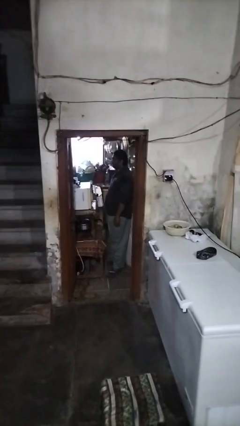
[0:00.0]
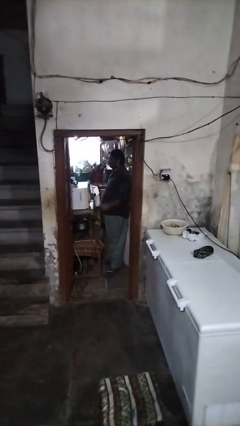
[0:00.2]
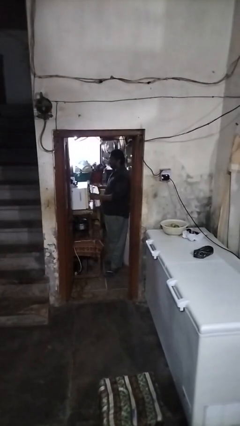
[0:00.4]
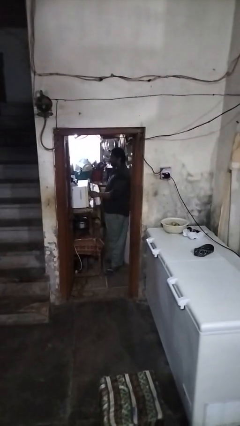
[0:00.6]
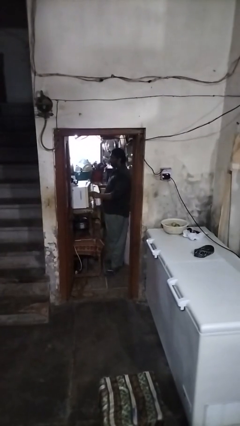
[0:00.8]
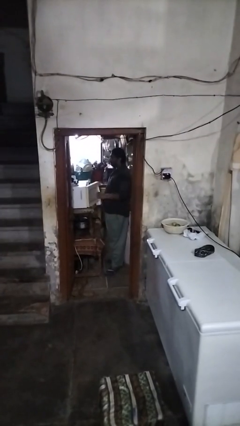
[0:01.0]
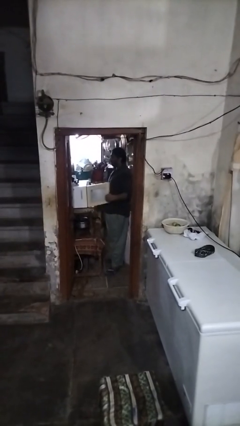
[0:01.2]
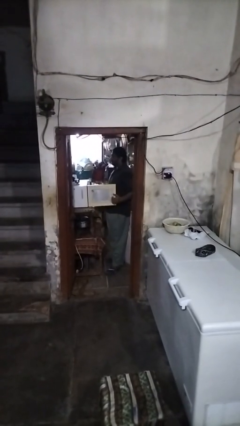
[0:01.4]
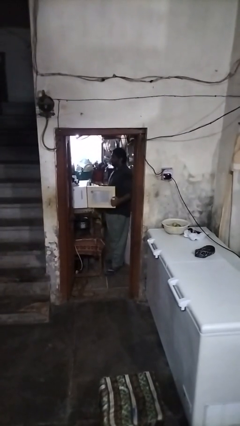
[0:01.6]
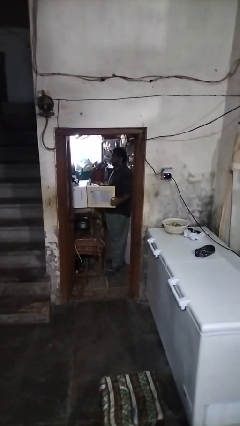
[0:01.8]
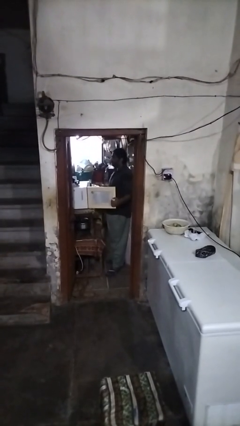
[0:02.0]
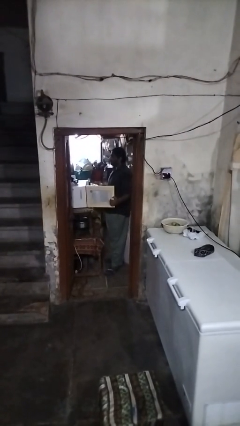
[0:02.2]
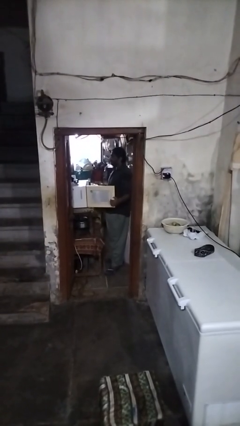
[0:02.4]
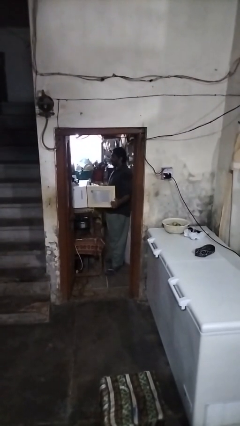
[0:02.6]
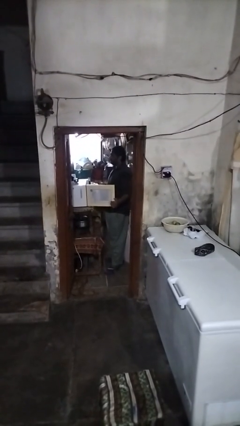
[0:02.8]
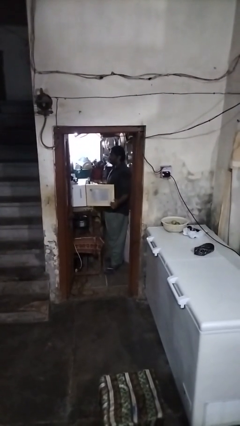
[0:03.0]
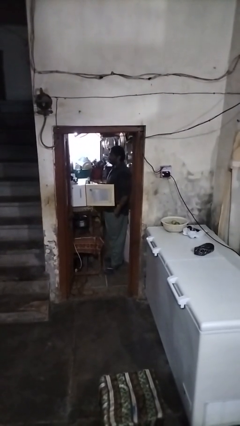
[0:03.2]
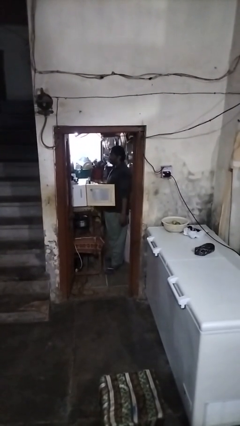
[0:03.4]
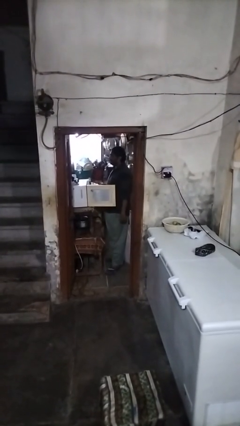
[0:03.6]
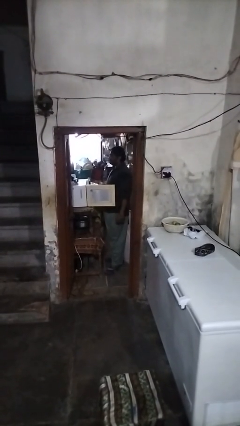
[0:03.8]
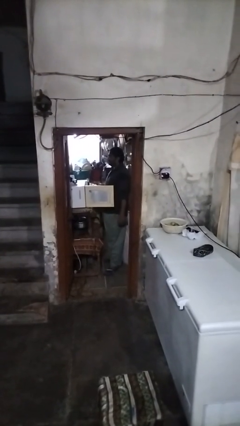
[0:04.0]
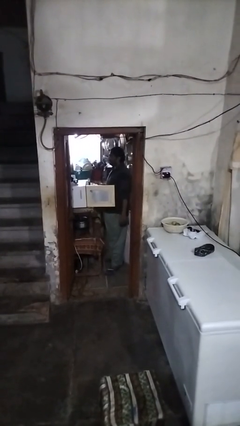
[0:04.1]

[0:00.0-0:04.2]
person opens oven door

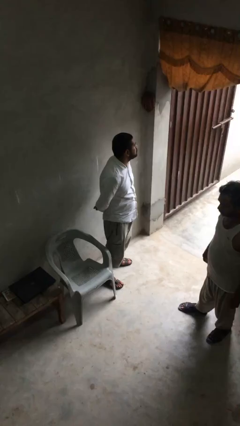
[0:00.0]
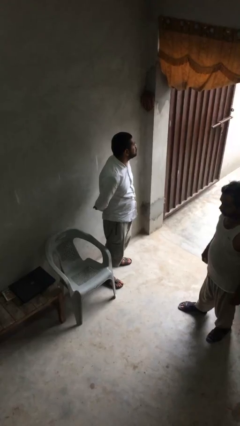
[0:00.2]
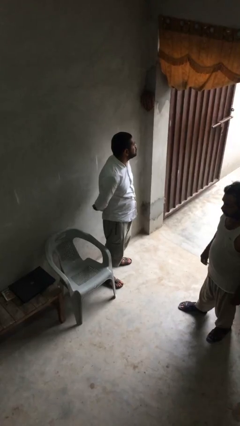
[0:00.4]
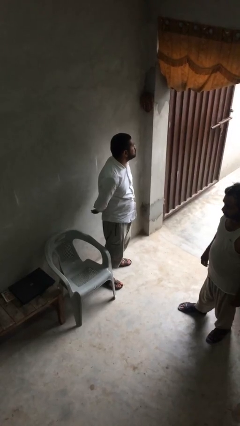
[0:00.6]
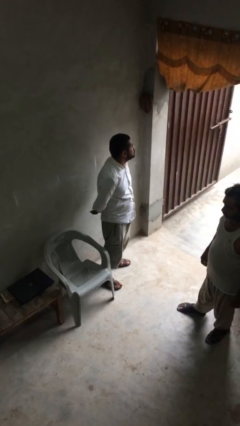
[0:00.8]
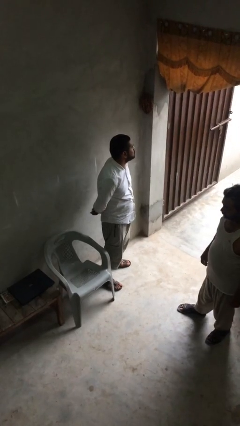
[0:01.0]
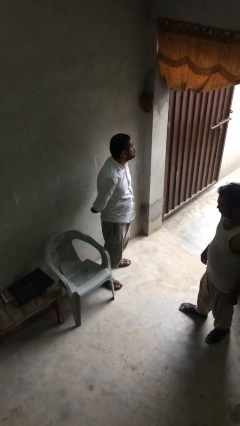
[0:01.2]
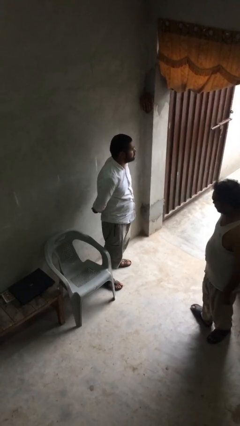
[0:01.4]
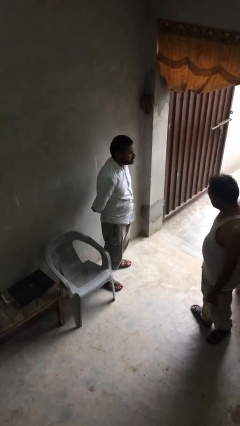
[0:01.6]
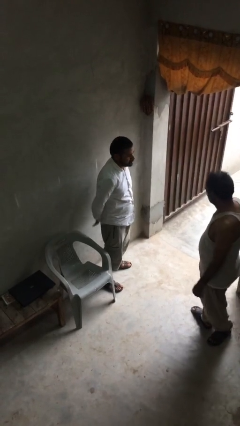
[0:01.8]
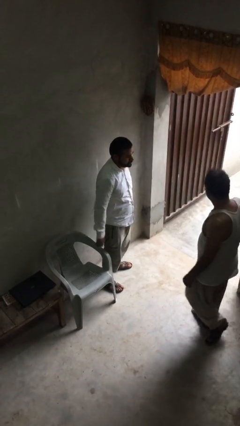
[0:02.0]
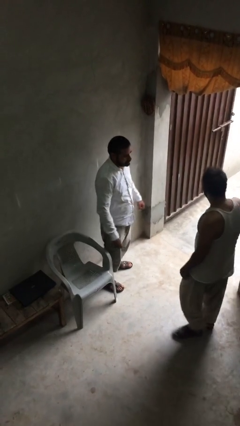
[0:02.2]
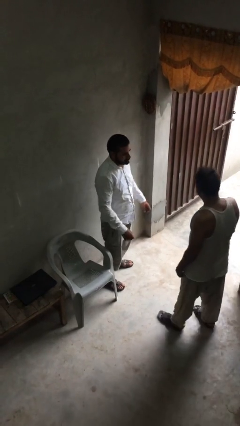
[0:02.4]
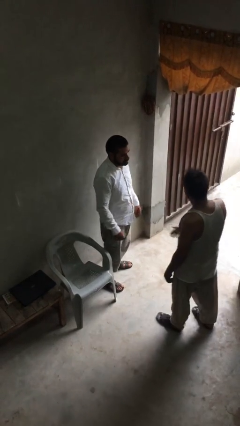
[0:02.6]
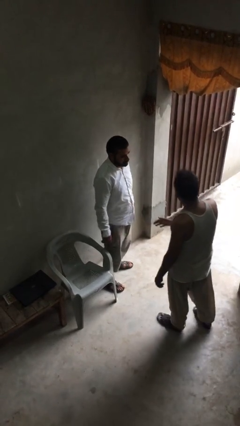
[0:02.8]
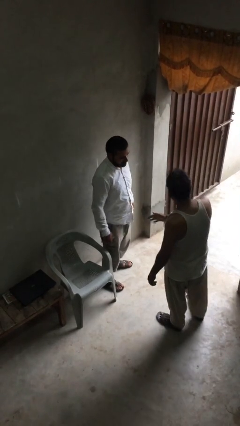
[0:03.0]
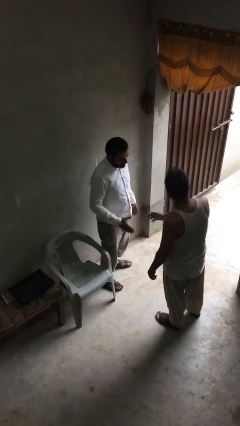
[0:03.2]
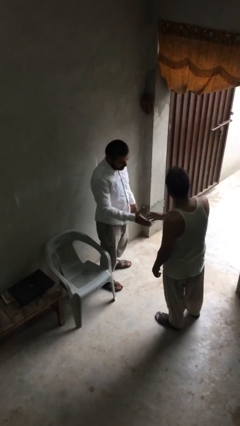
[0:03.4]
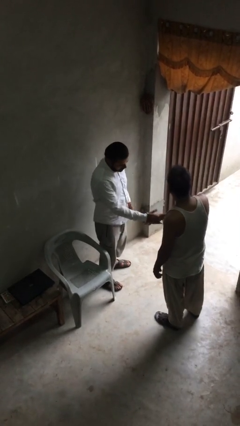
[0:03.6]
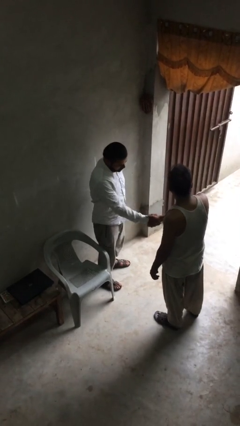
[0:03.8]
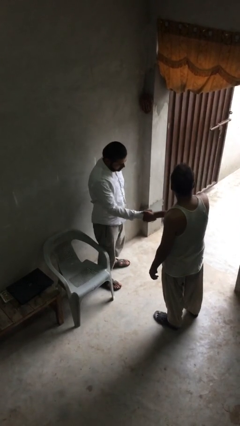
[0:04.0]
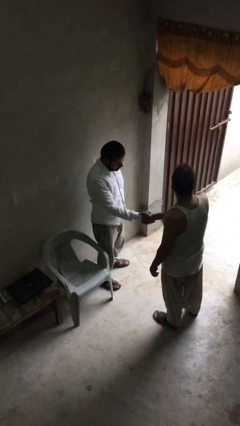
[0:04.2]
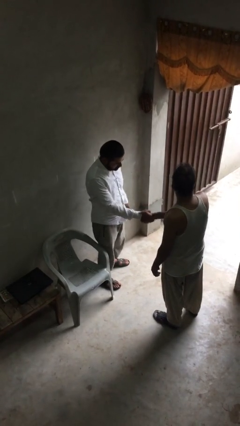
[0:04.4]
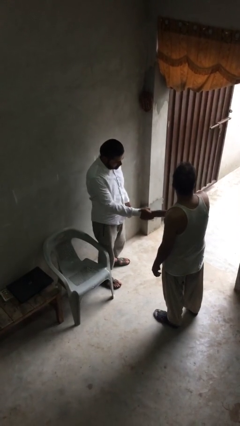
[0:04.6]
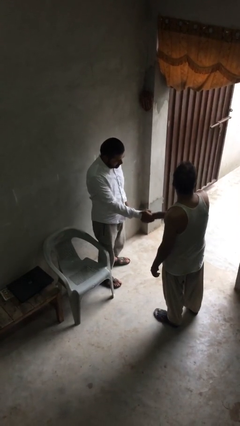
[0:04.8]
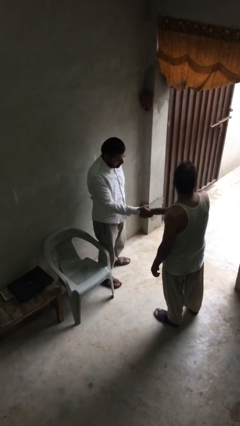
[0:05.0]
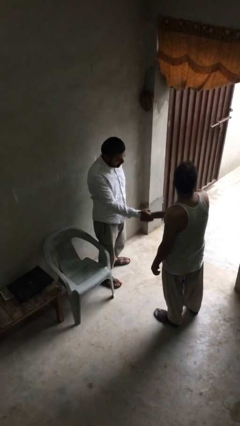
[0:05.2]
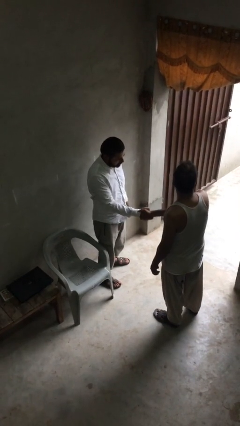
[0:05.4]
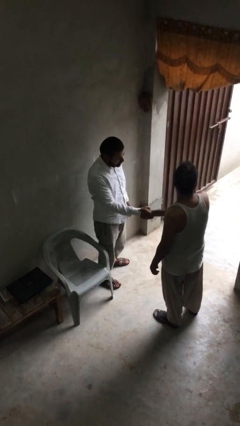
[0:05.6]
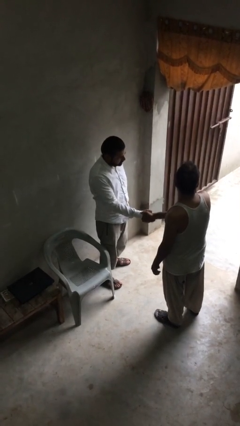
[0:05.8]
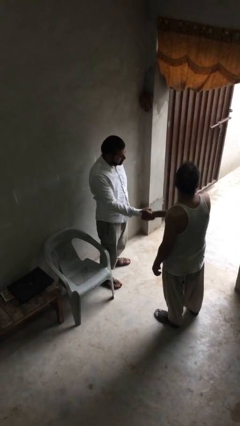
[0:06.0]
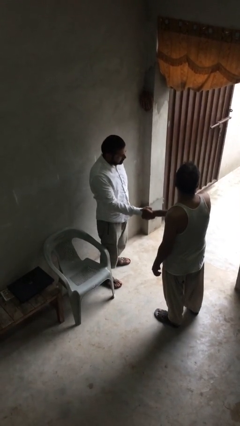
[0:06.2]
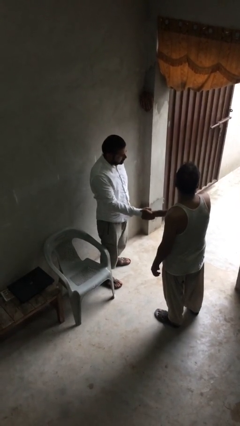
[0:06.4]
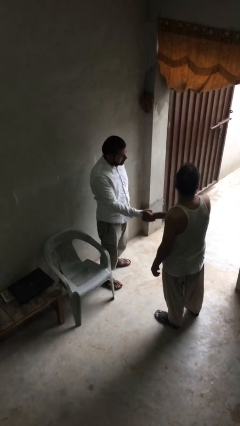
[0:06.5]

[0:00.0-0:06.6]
person shakes hand

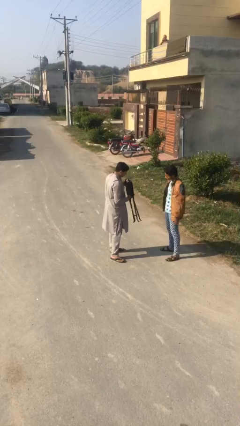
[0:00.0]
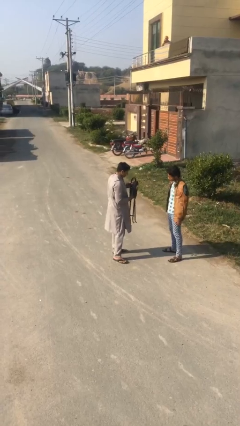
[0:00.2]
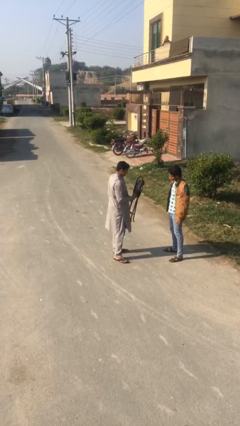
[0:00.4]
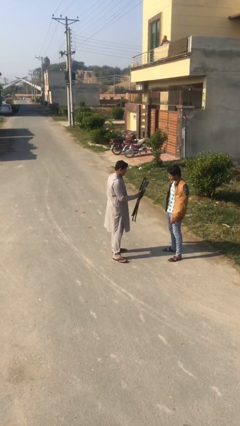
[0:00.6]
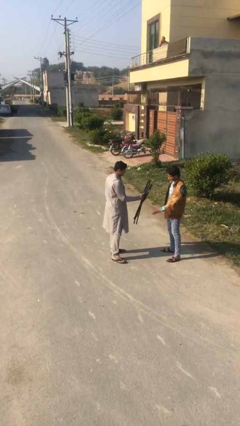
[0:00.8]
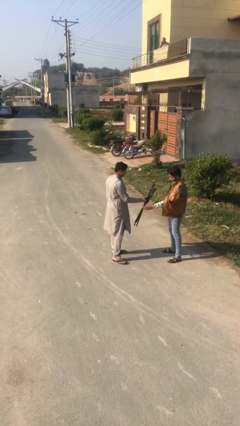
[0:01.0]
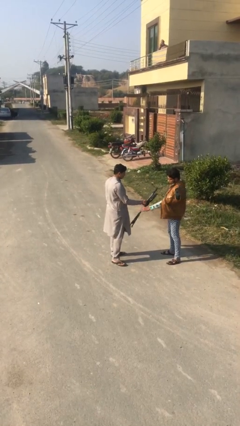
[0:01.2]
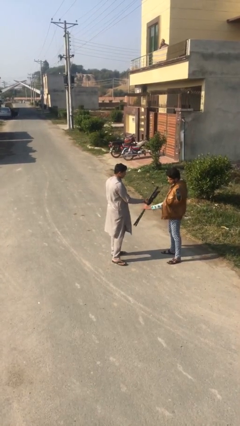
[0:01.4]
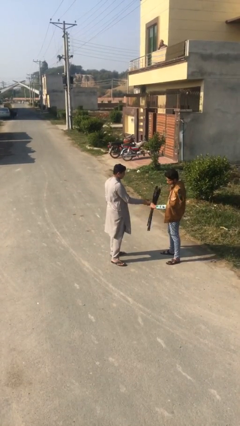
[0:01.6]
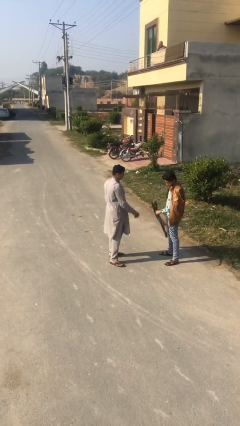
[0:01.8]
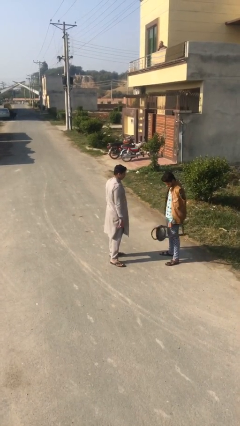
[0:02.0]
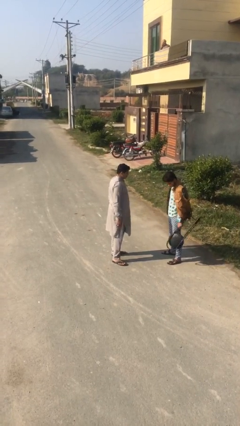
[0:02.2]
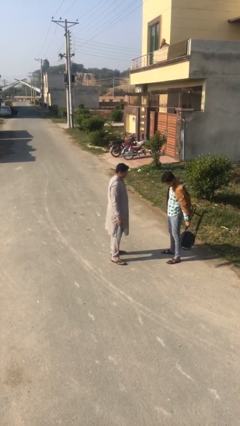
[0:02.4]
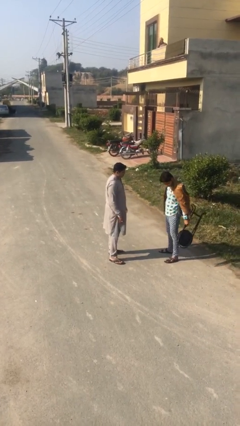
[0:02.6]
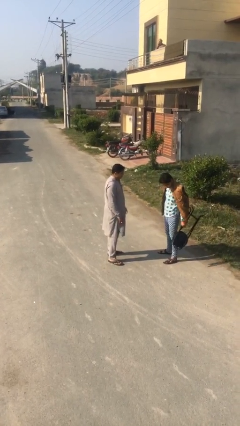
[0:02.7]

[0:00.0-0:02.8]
person transfers object to person

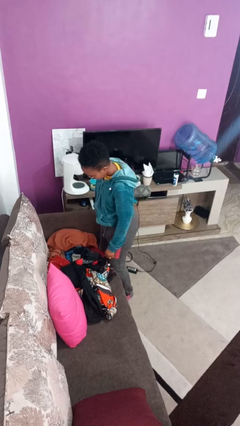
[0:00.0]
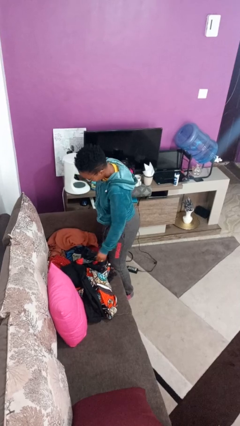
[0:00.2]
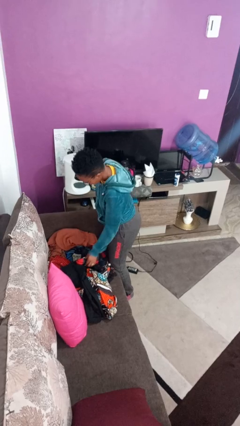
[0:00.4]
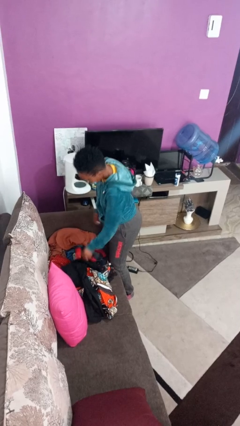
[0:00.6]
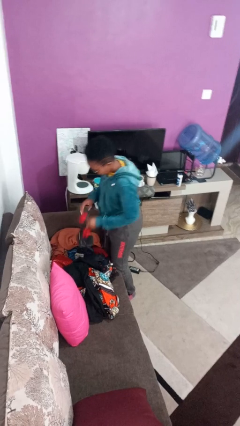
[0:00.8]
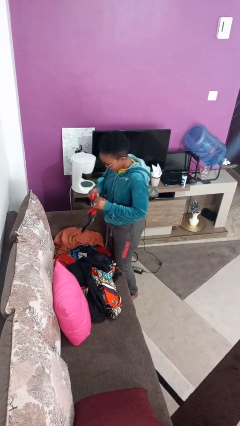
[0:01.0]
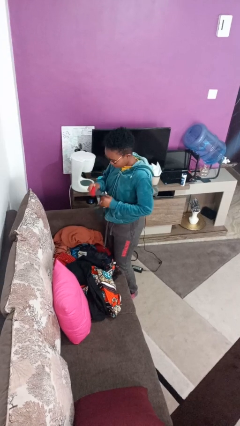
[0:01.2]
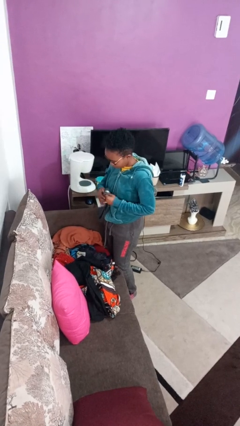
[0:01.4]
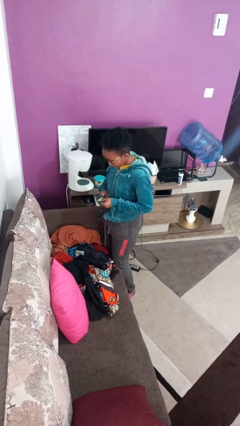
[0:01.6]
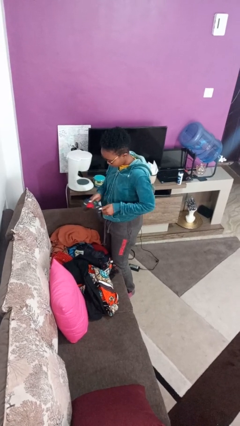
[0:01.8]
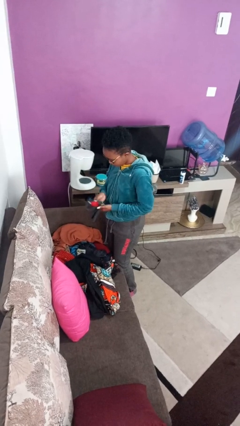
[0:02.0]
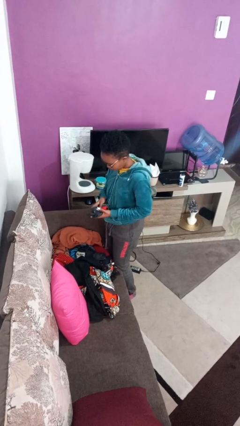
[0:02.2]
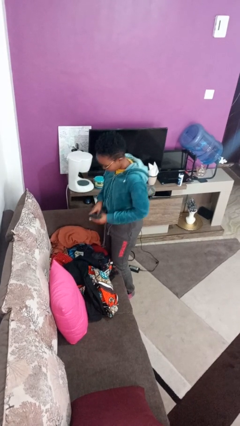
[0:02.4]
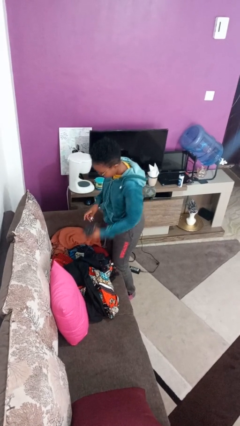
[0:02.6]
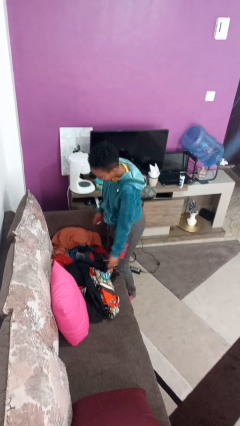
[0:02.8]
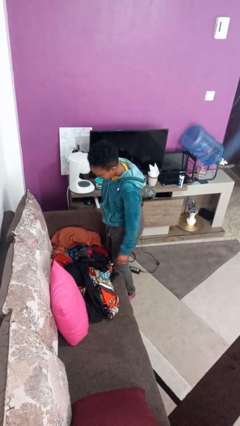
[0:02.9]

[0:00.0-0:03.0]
person folds socks

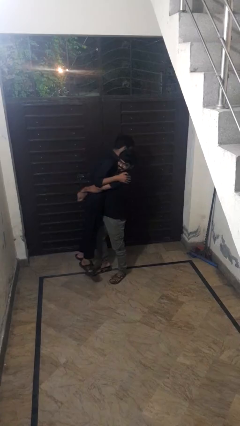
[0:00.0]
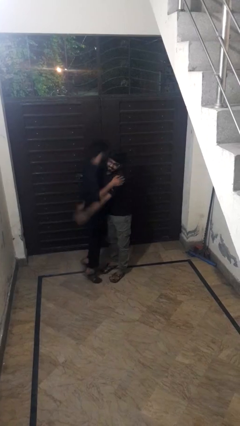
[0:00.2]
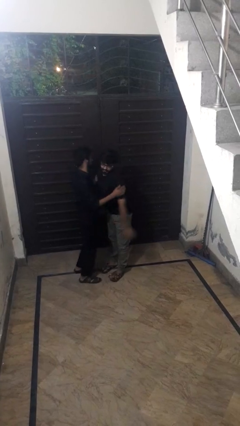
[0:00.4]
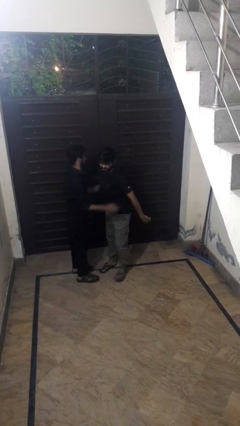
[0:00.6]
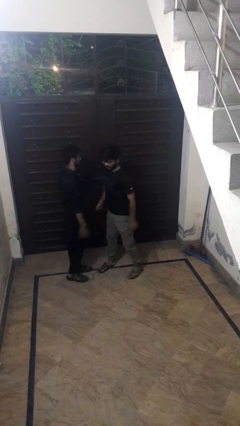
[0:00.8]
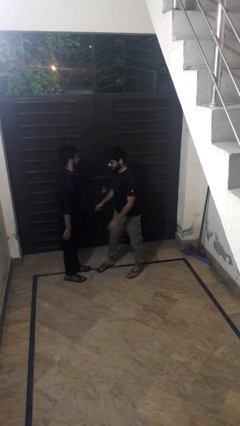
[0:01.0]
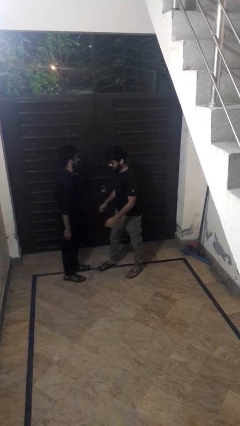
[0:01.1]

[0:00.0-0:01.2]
person puts down person
